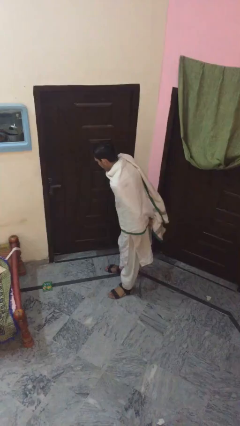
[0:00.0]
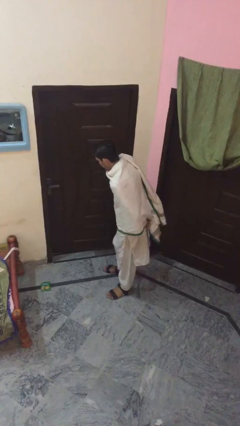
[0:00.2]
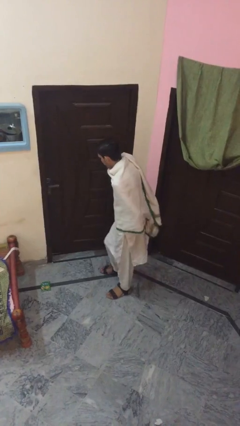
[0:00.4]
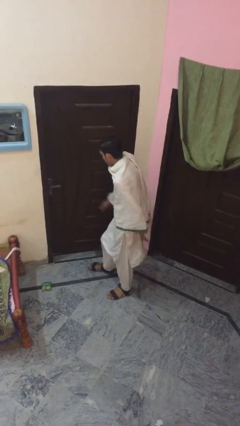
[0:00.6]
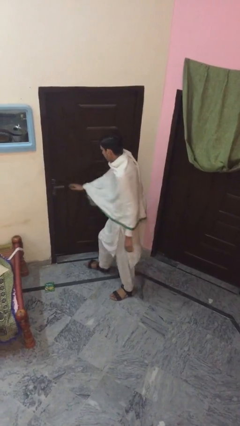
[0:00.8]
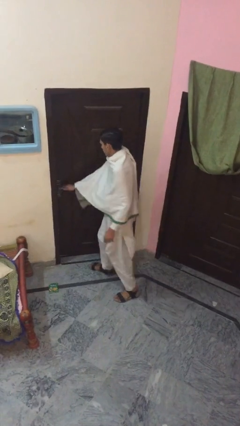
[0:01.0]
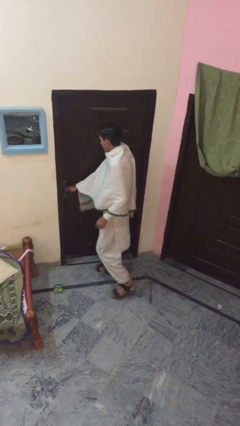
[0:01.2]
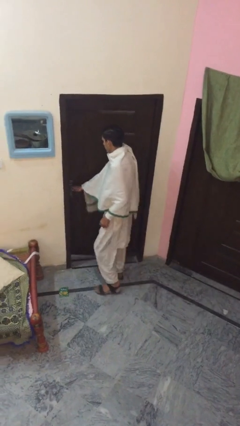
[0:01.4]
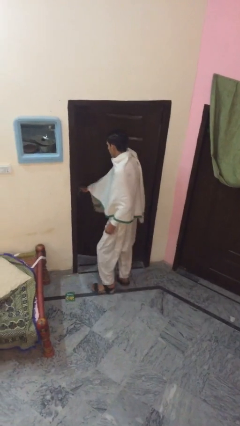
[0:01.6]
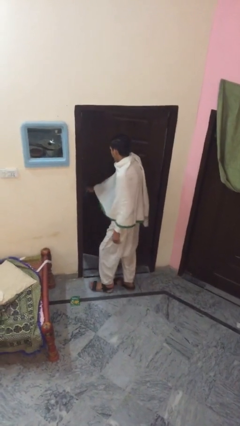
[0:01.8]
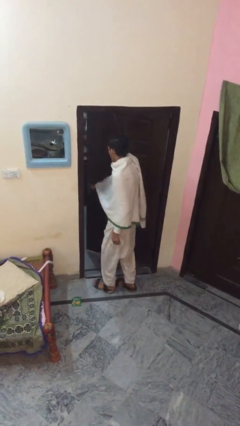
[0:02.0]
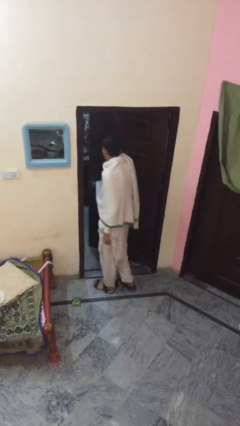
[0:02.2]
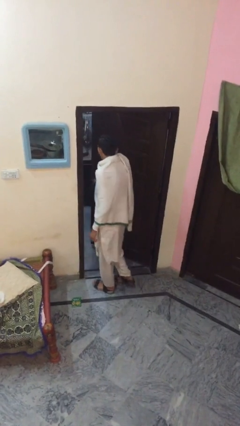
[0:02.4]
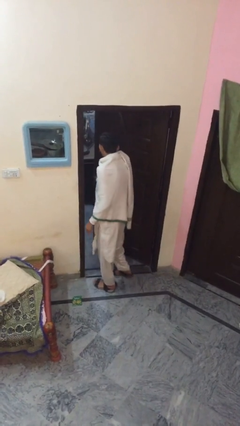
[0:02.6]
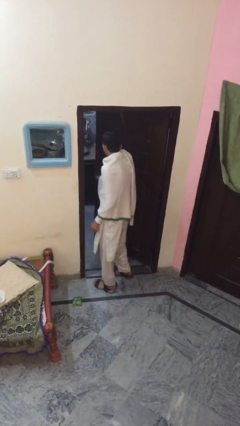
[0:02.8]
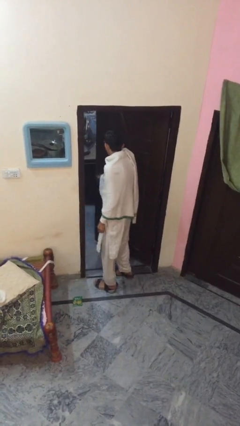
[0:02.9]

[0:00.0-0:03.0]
person opens facility door

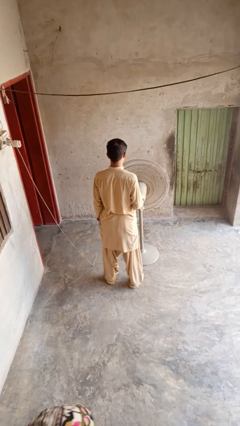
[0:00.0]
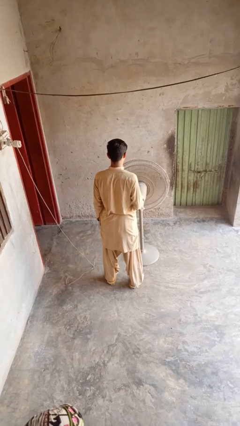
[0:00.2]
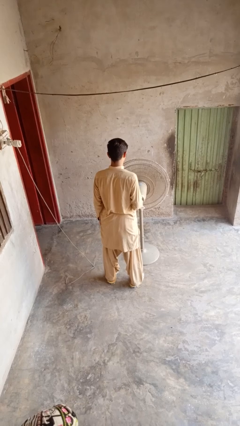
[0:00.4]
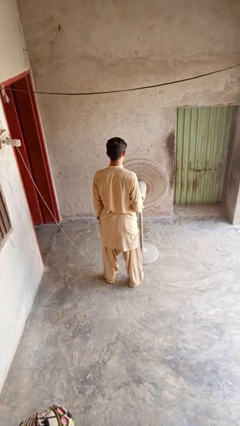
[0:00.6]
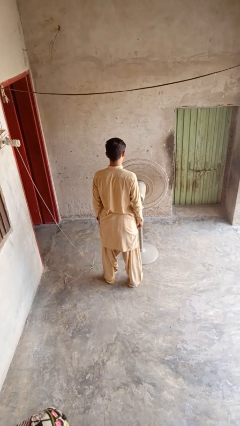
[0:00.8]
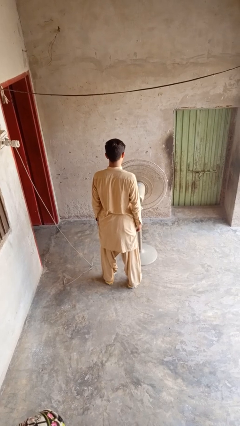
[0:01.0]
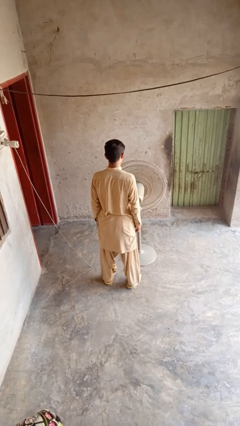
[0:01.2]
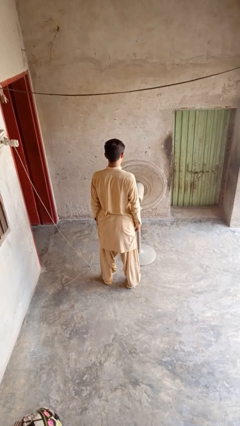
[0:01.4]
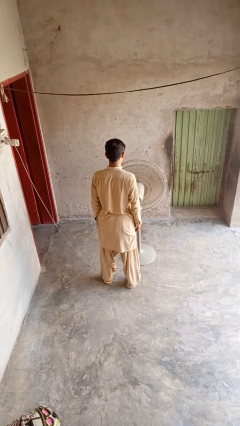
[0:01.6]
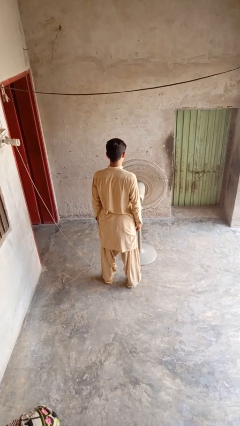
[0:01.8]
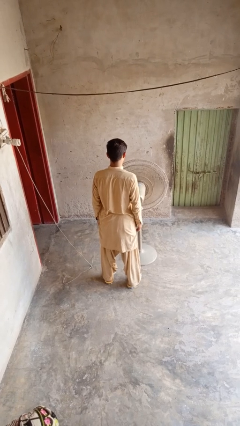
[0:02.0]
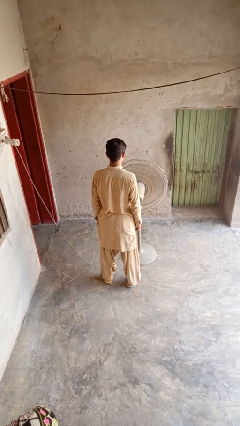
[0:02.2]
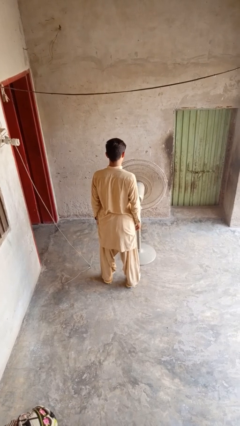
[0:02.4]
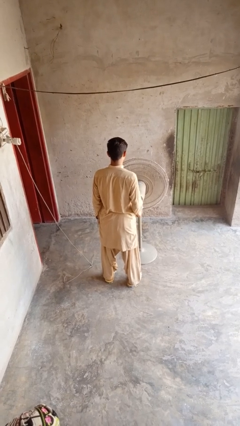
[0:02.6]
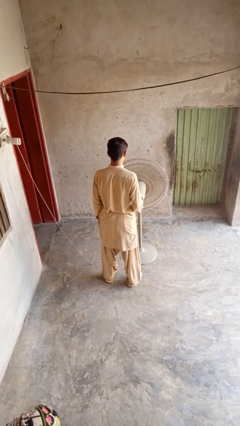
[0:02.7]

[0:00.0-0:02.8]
person turns off fan

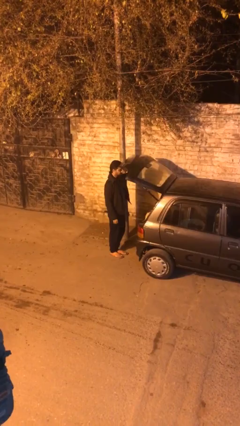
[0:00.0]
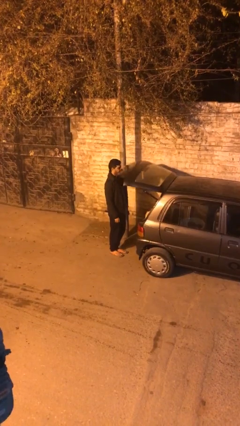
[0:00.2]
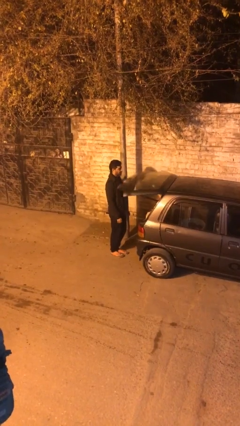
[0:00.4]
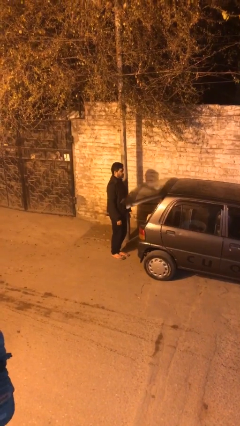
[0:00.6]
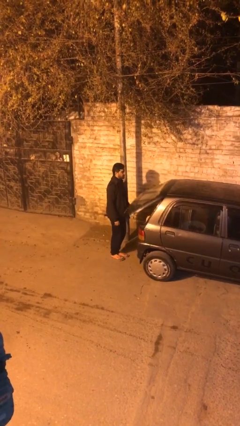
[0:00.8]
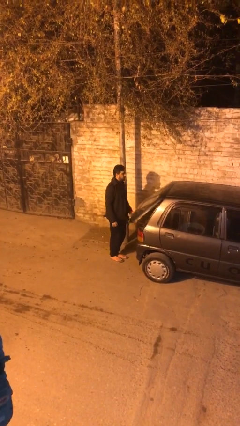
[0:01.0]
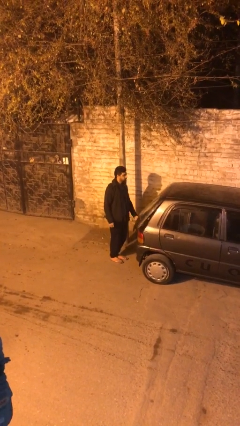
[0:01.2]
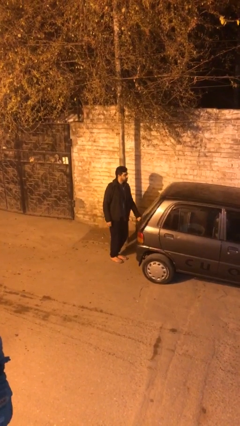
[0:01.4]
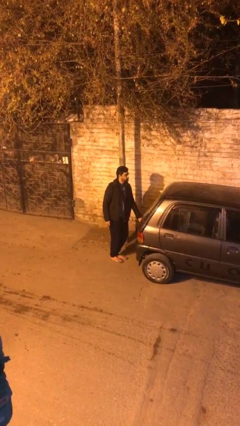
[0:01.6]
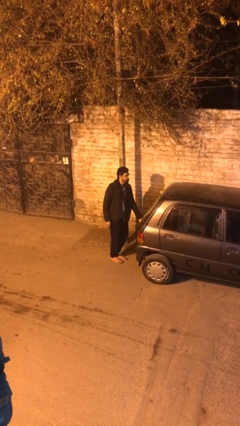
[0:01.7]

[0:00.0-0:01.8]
person closes car trunk

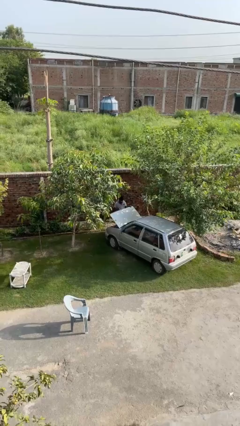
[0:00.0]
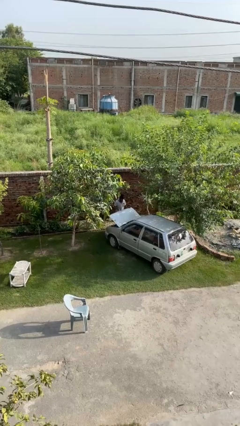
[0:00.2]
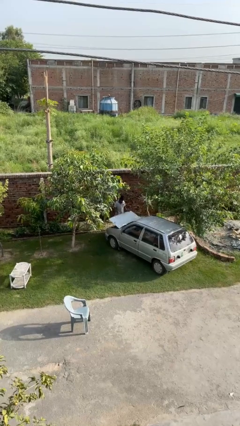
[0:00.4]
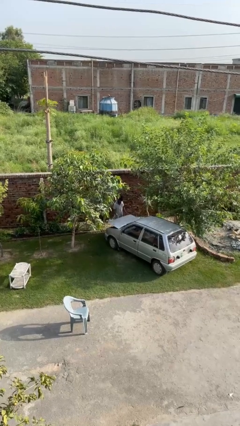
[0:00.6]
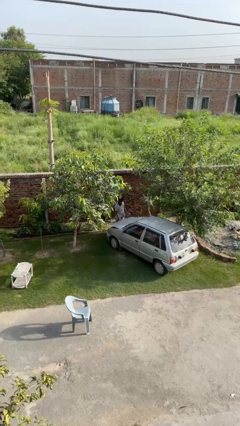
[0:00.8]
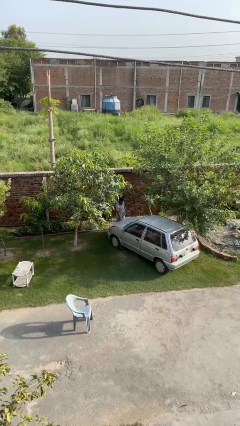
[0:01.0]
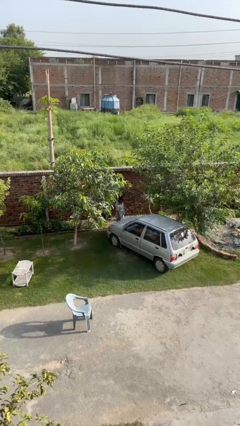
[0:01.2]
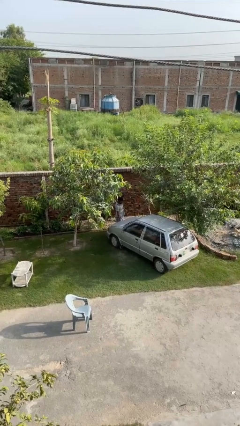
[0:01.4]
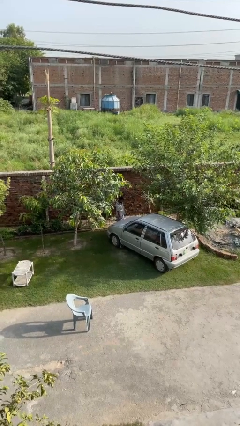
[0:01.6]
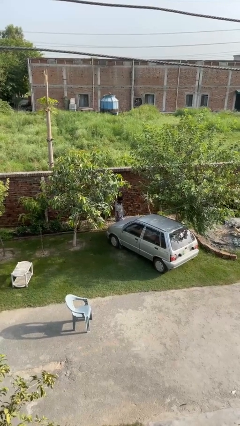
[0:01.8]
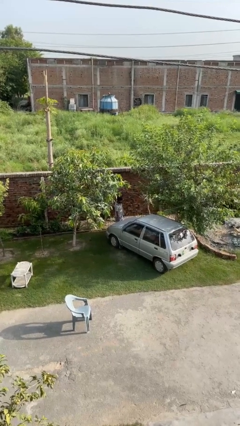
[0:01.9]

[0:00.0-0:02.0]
person closes car hood

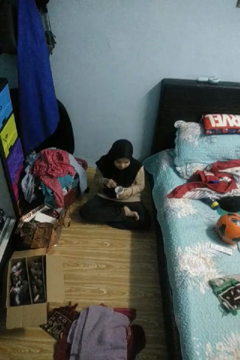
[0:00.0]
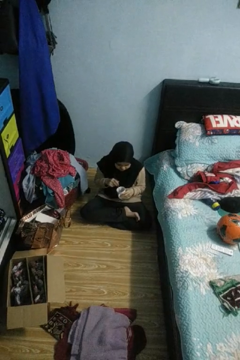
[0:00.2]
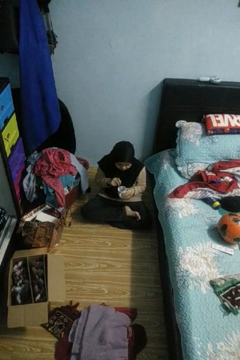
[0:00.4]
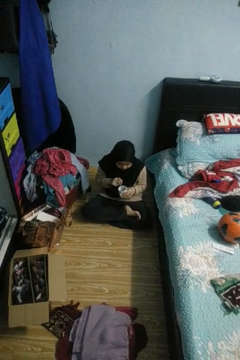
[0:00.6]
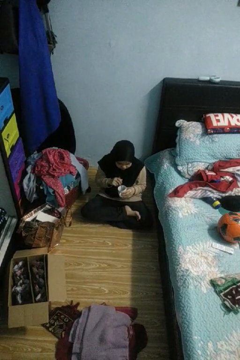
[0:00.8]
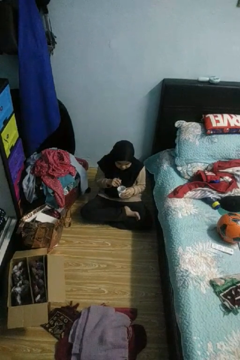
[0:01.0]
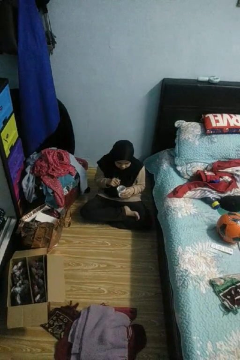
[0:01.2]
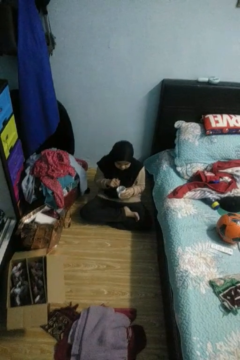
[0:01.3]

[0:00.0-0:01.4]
person stirs mug

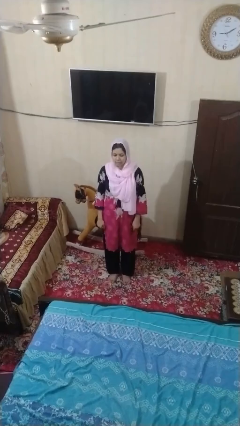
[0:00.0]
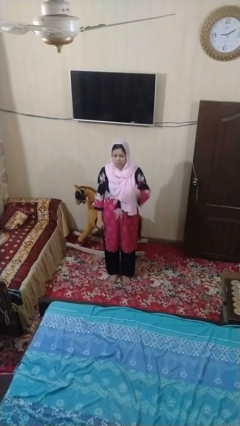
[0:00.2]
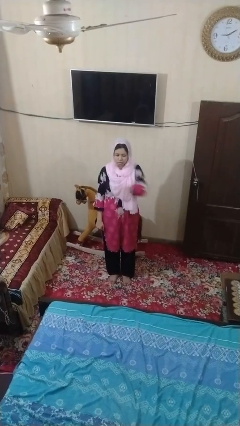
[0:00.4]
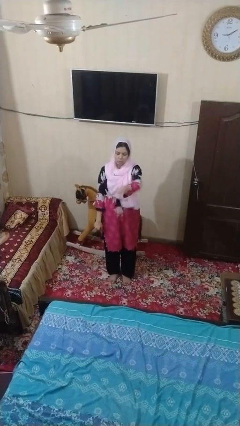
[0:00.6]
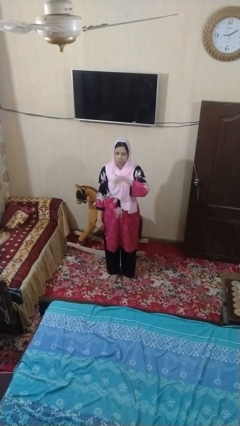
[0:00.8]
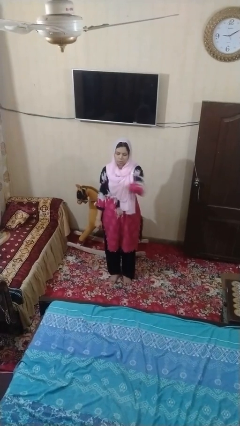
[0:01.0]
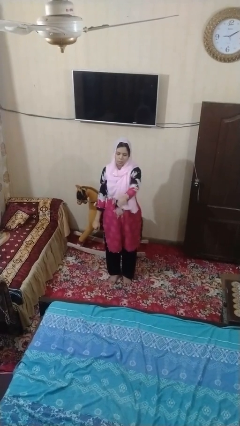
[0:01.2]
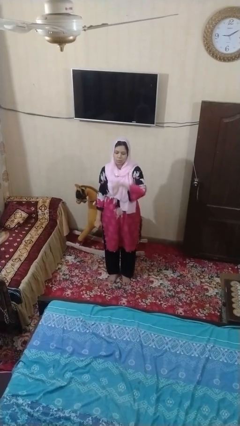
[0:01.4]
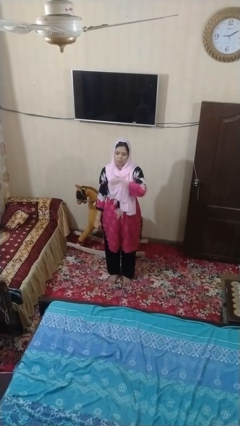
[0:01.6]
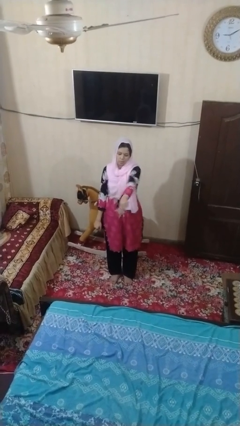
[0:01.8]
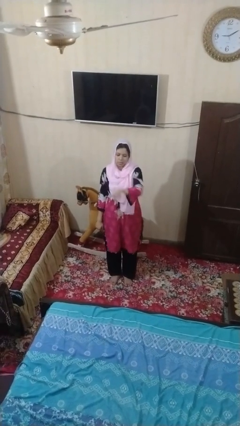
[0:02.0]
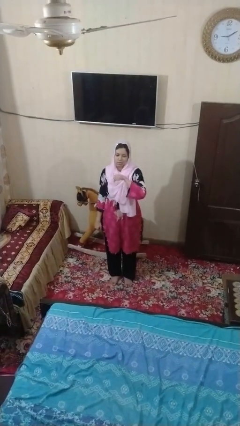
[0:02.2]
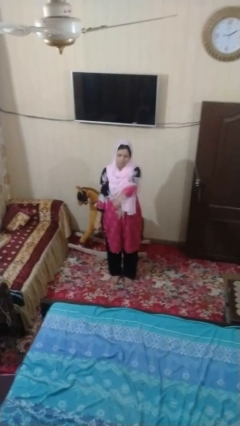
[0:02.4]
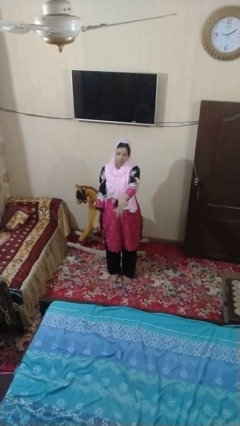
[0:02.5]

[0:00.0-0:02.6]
person punches

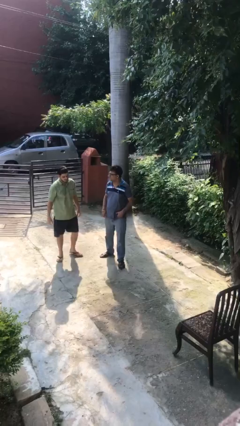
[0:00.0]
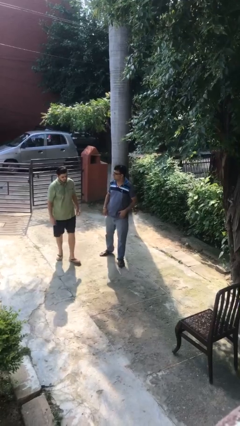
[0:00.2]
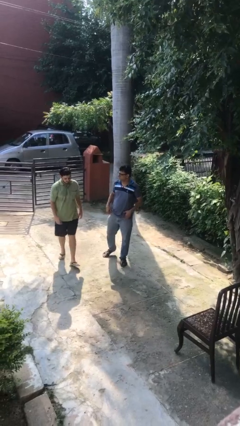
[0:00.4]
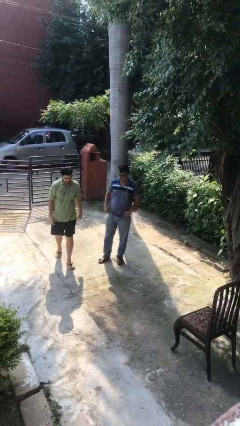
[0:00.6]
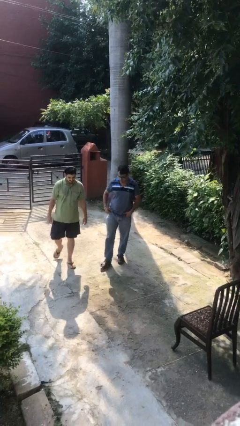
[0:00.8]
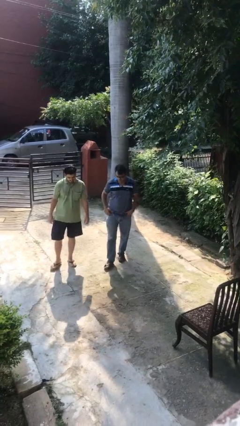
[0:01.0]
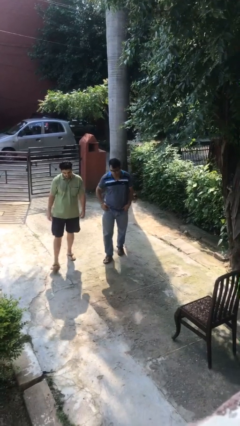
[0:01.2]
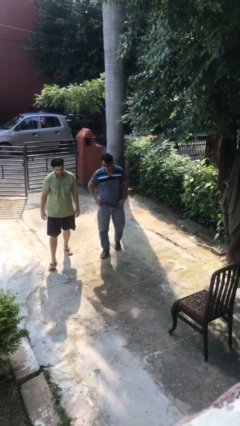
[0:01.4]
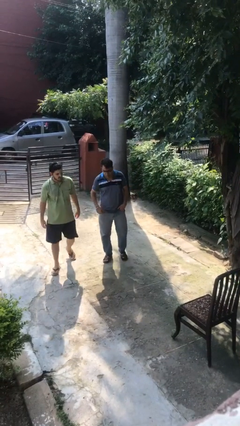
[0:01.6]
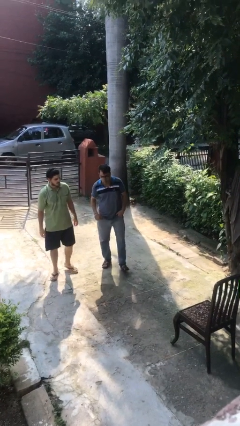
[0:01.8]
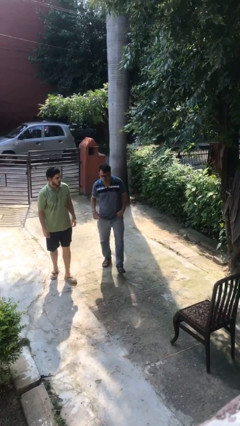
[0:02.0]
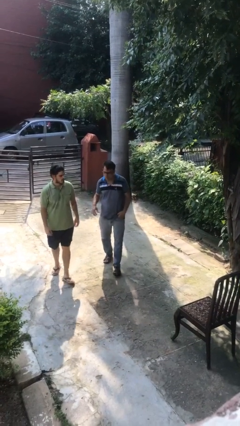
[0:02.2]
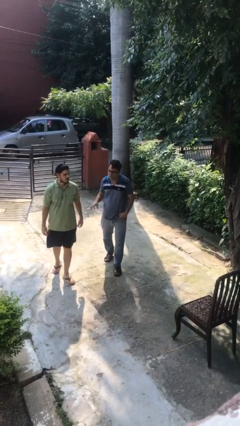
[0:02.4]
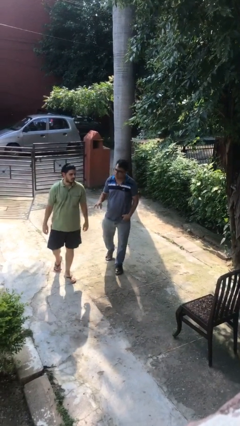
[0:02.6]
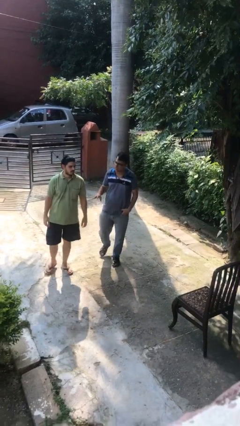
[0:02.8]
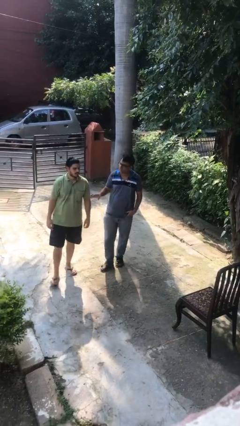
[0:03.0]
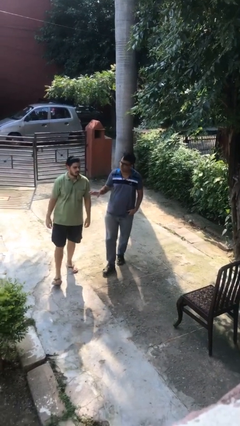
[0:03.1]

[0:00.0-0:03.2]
person talks to person

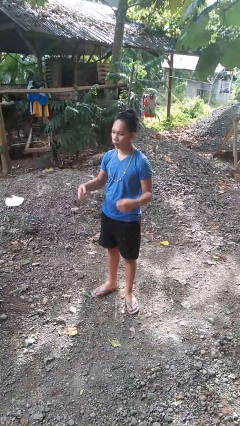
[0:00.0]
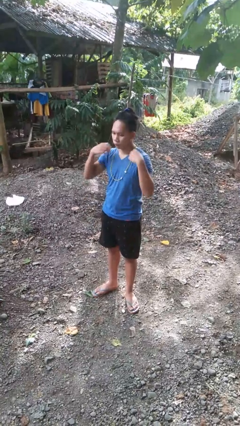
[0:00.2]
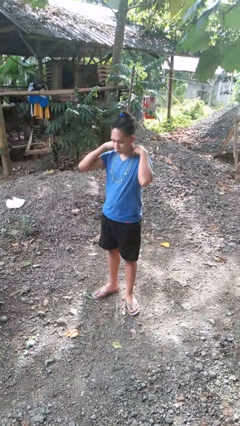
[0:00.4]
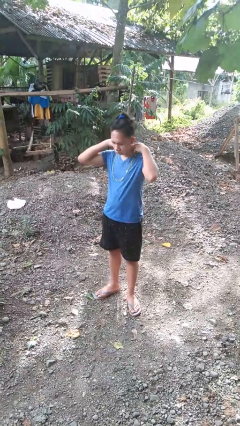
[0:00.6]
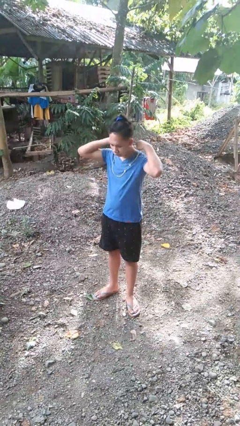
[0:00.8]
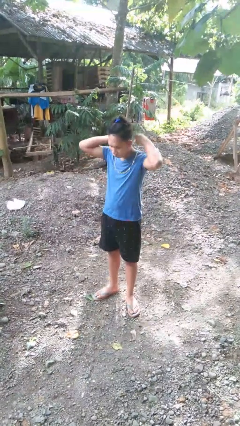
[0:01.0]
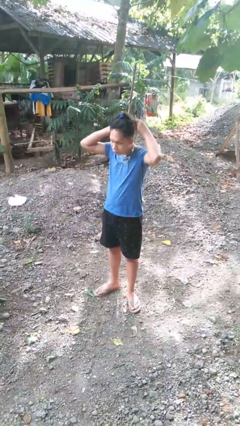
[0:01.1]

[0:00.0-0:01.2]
person takes off necklace
